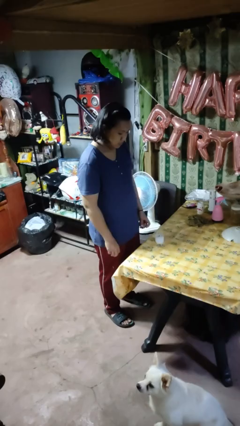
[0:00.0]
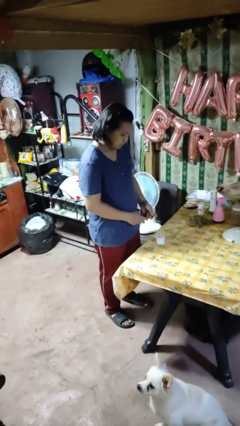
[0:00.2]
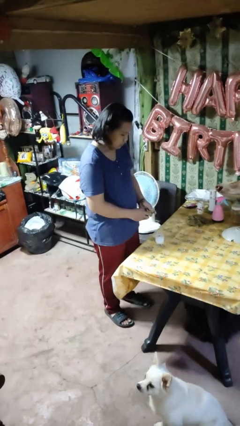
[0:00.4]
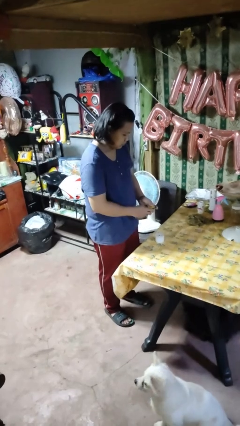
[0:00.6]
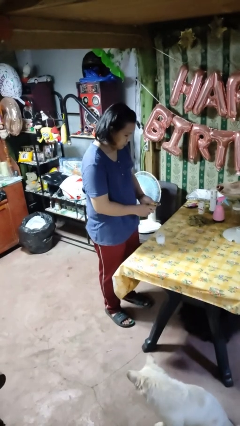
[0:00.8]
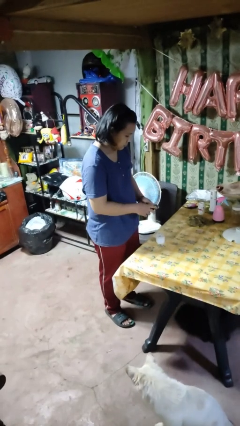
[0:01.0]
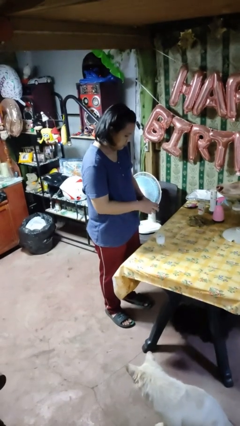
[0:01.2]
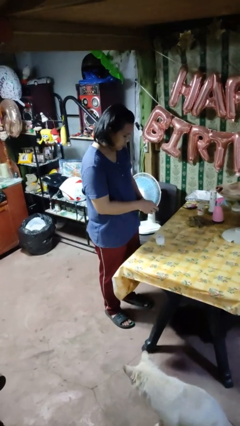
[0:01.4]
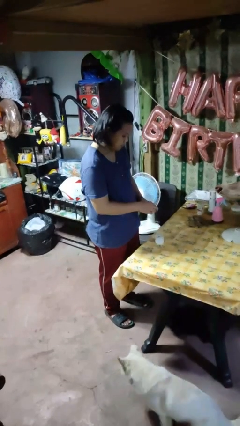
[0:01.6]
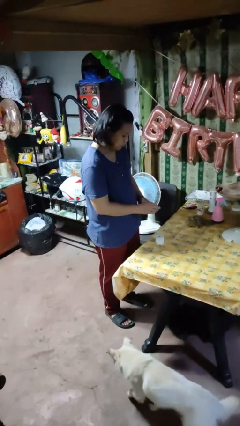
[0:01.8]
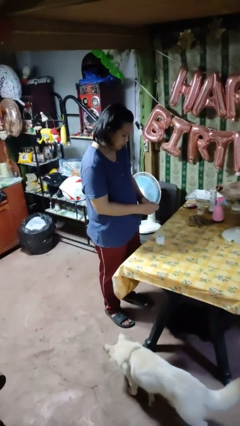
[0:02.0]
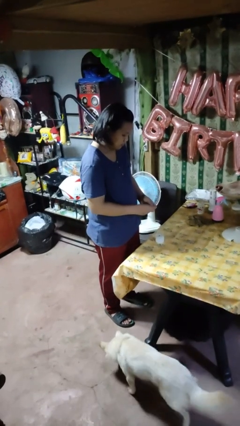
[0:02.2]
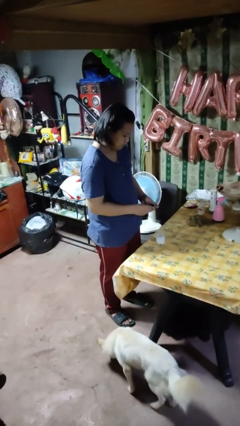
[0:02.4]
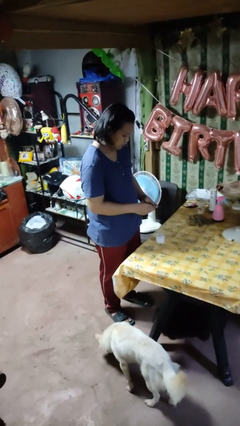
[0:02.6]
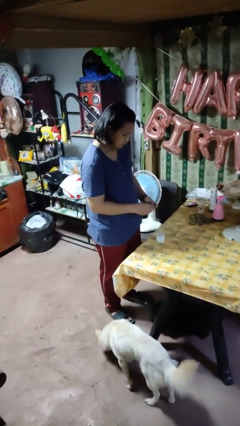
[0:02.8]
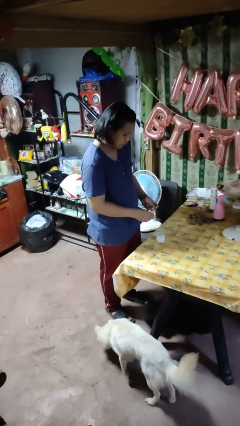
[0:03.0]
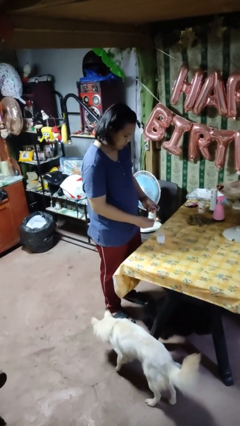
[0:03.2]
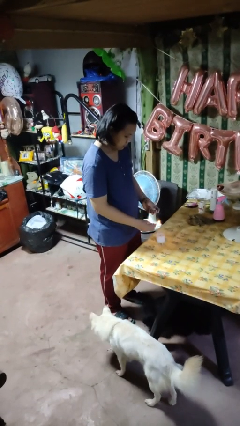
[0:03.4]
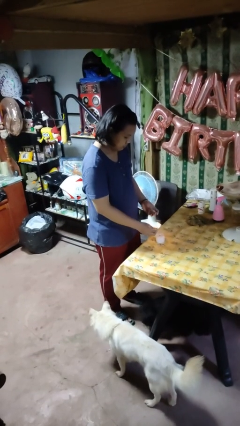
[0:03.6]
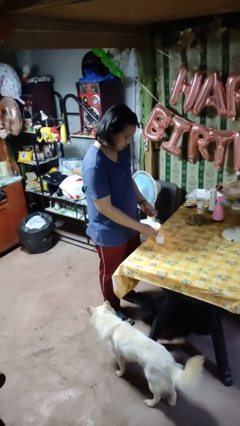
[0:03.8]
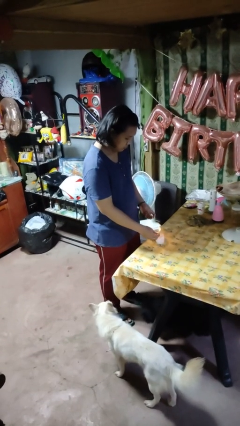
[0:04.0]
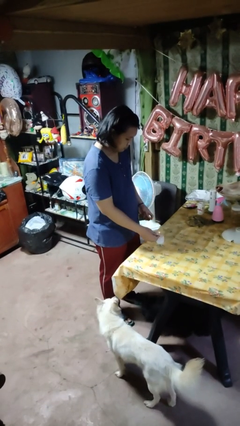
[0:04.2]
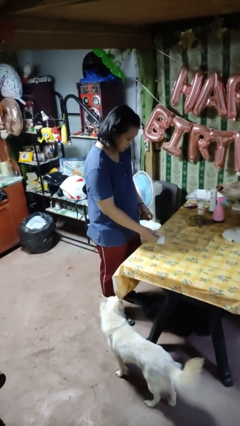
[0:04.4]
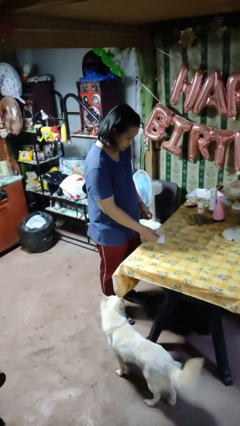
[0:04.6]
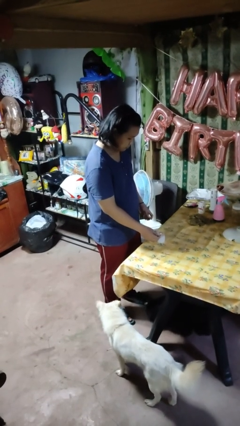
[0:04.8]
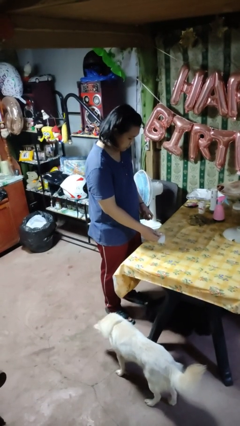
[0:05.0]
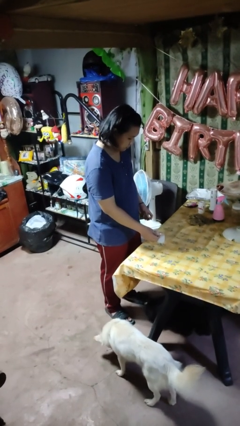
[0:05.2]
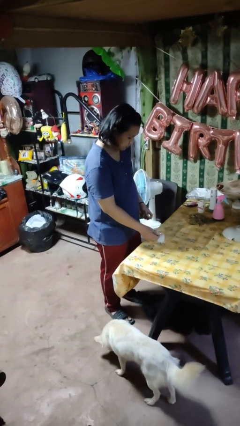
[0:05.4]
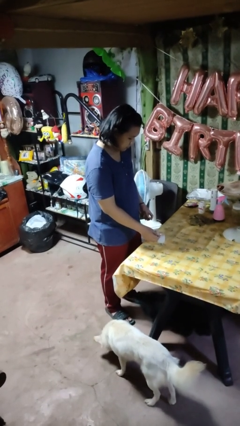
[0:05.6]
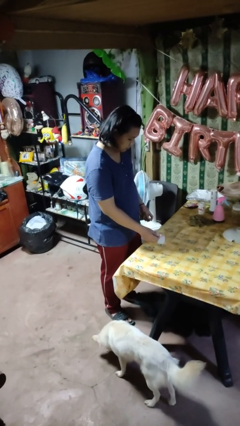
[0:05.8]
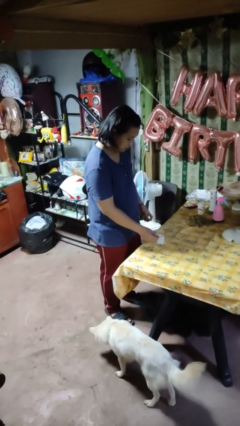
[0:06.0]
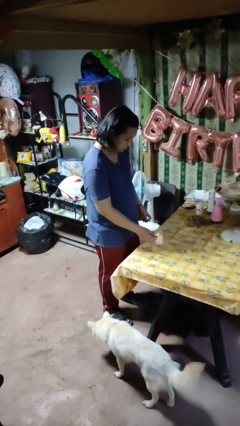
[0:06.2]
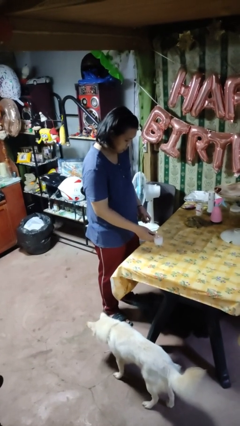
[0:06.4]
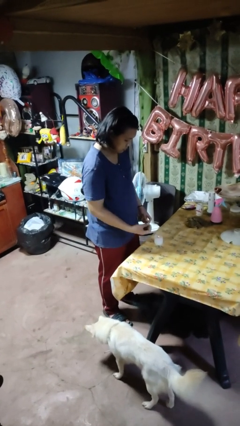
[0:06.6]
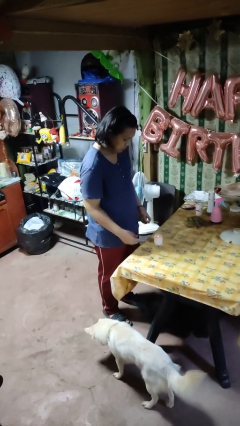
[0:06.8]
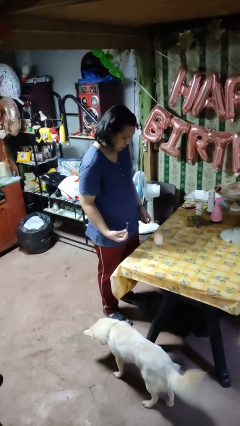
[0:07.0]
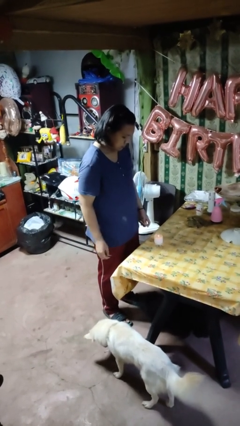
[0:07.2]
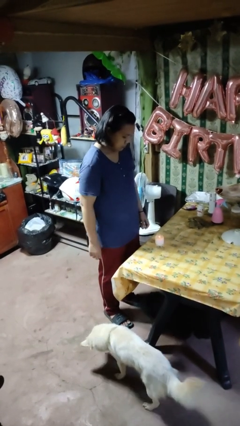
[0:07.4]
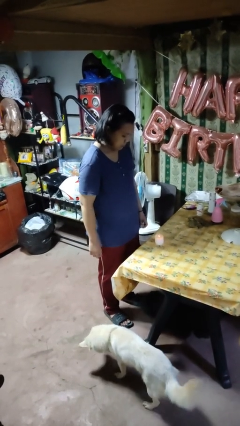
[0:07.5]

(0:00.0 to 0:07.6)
person lights candle

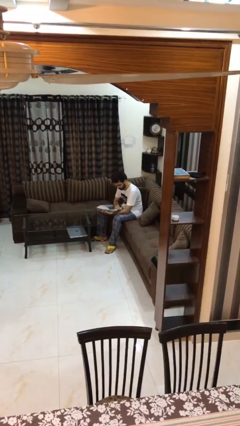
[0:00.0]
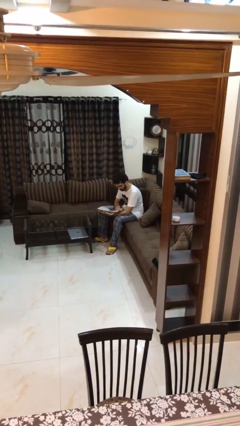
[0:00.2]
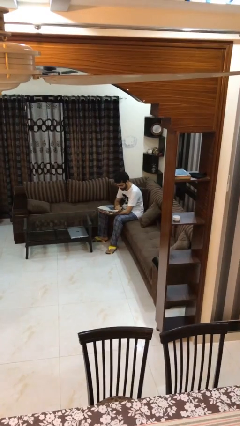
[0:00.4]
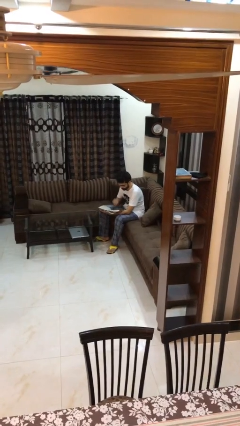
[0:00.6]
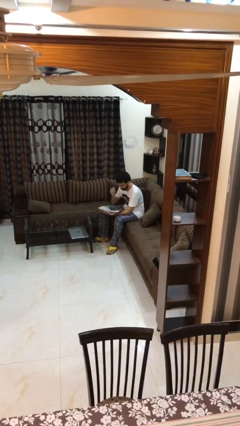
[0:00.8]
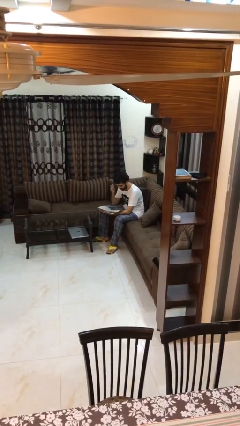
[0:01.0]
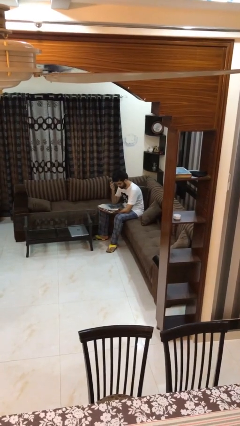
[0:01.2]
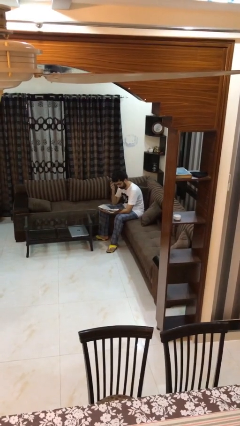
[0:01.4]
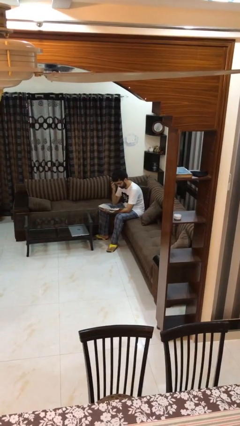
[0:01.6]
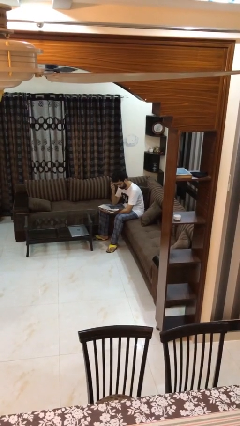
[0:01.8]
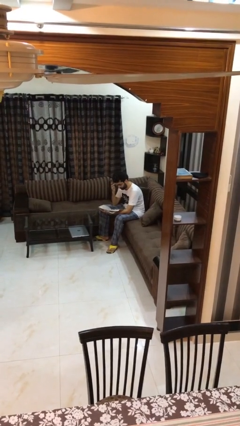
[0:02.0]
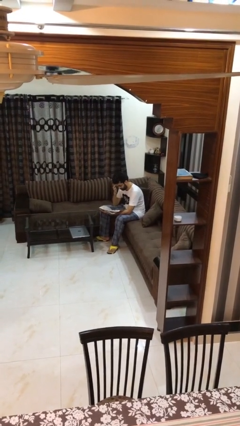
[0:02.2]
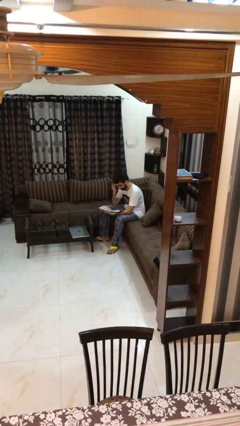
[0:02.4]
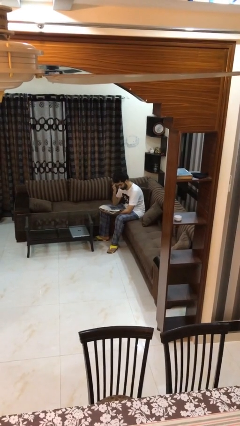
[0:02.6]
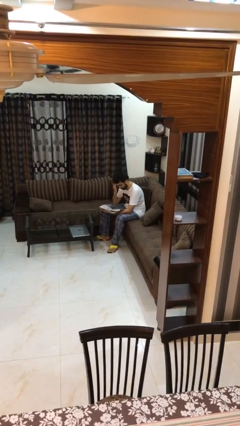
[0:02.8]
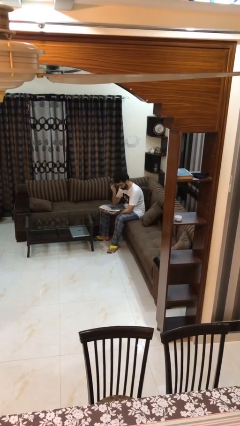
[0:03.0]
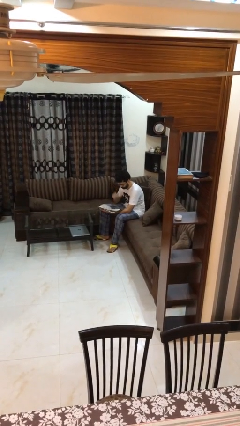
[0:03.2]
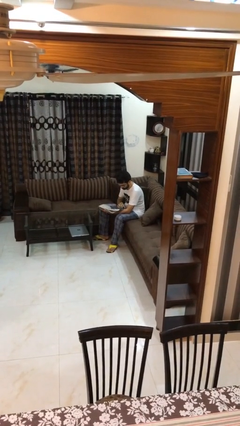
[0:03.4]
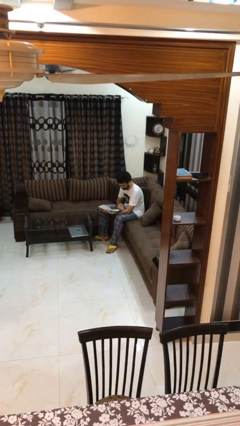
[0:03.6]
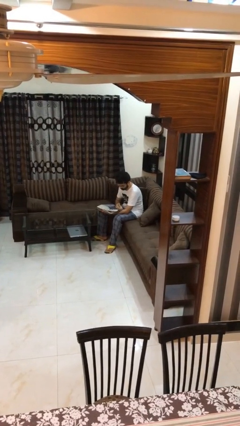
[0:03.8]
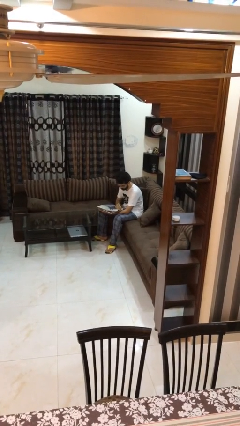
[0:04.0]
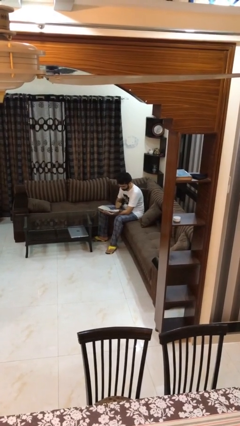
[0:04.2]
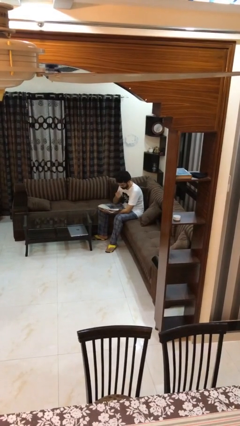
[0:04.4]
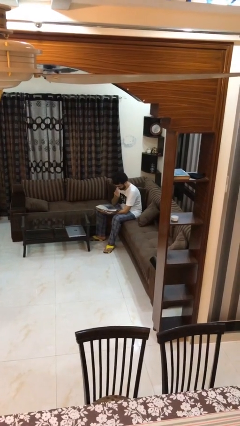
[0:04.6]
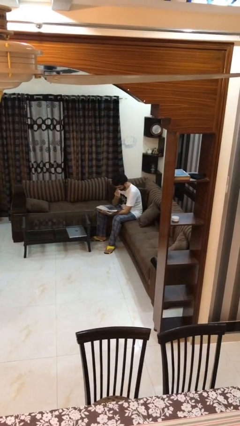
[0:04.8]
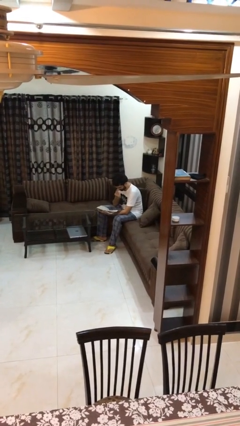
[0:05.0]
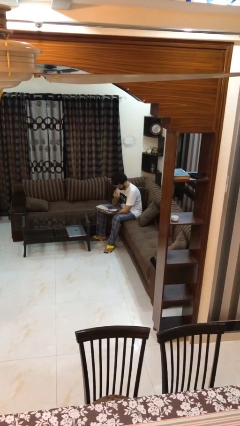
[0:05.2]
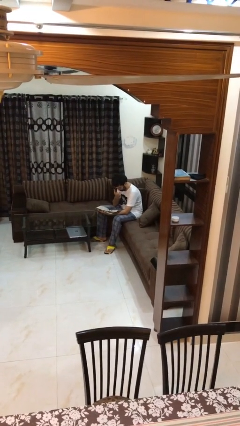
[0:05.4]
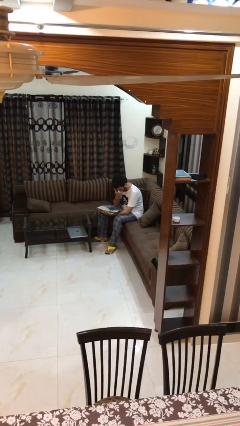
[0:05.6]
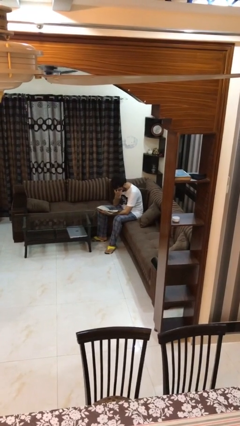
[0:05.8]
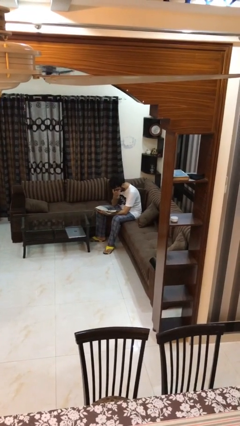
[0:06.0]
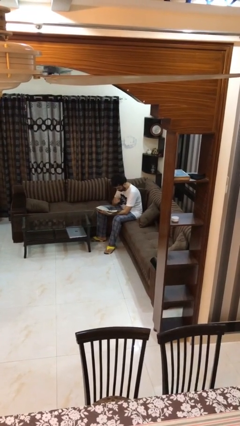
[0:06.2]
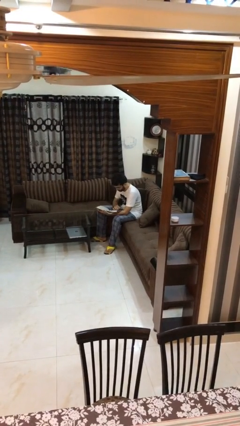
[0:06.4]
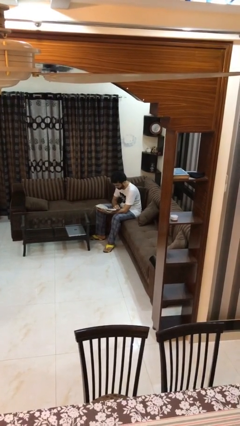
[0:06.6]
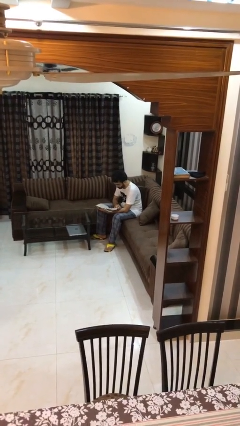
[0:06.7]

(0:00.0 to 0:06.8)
person reads document

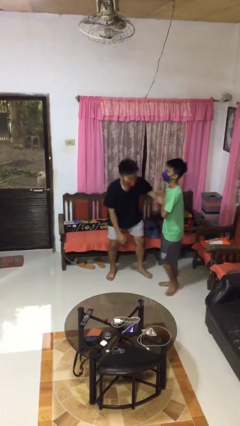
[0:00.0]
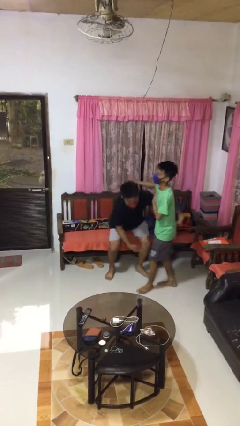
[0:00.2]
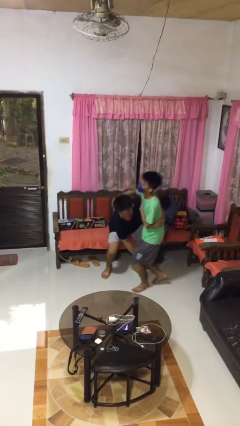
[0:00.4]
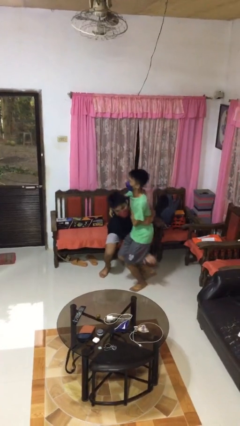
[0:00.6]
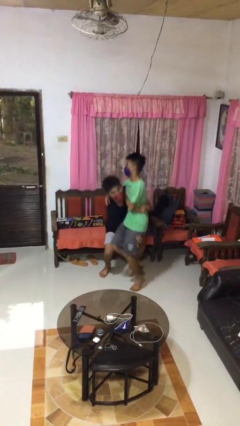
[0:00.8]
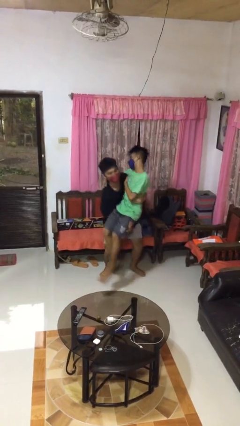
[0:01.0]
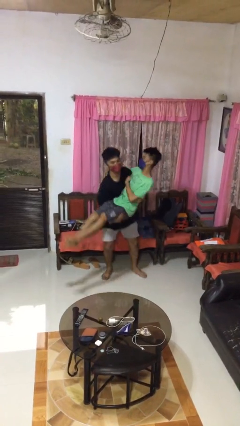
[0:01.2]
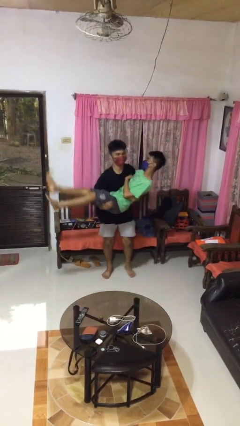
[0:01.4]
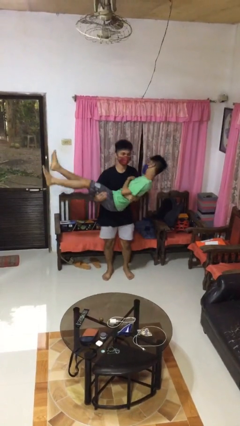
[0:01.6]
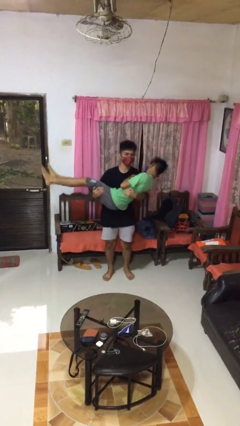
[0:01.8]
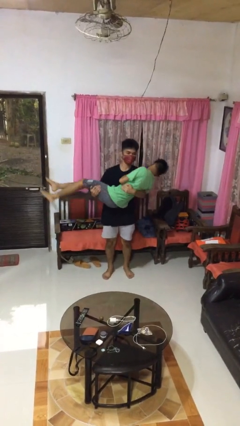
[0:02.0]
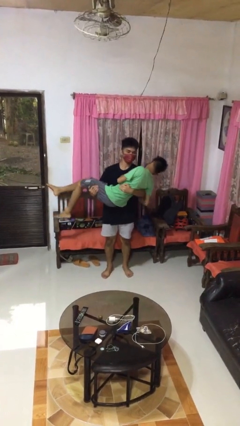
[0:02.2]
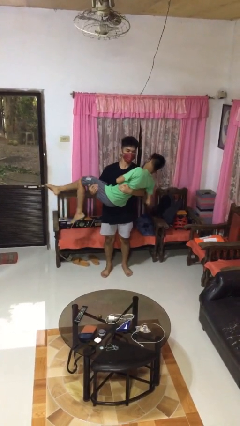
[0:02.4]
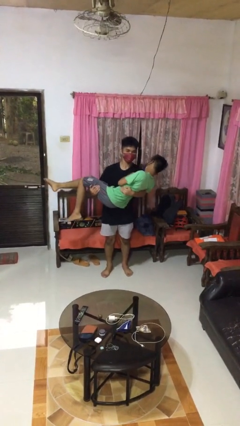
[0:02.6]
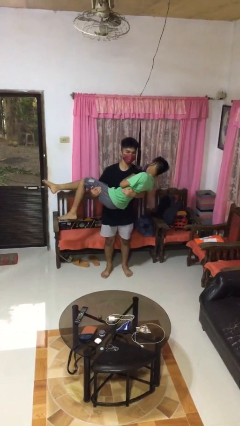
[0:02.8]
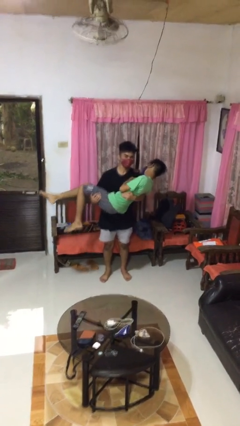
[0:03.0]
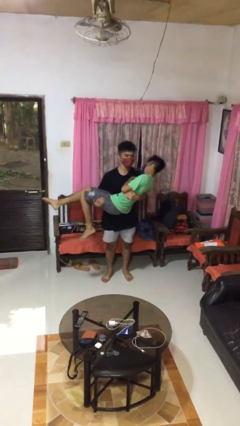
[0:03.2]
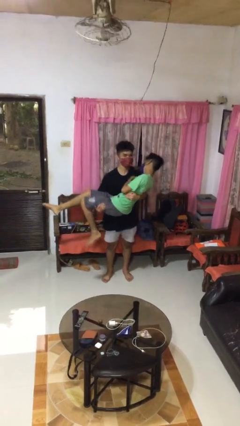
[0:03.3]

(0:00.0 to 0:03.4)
person picks up person
